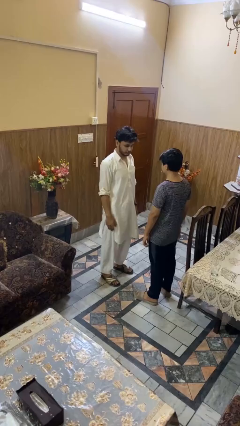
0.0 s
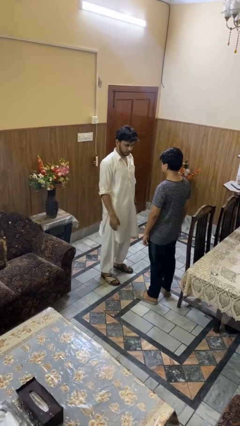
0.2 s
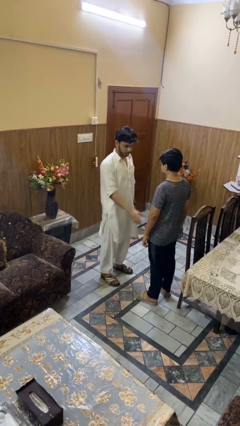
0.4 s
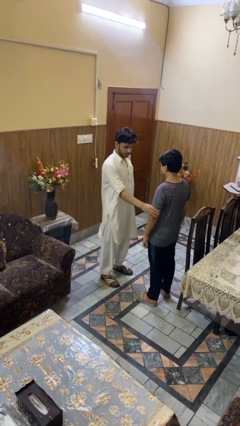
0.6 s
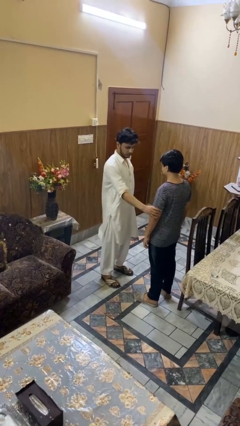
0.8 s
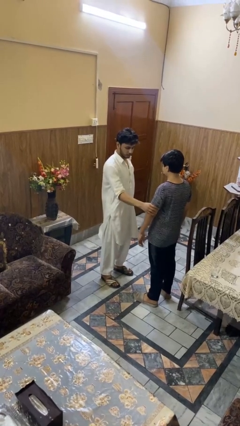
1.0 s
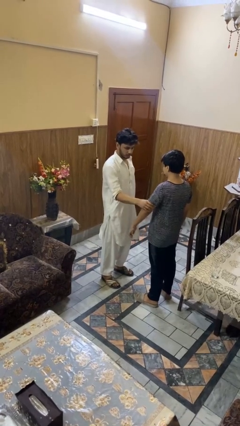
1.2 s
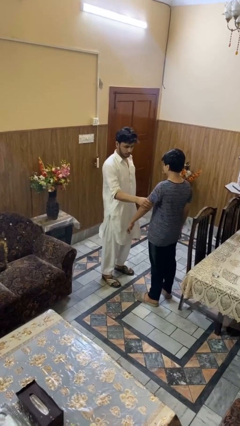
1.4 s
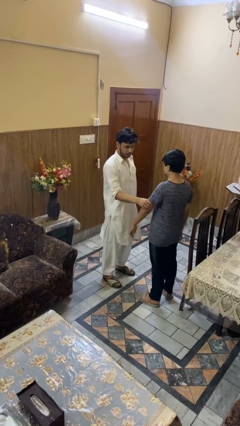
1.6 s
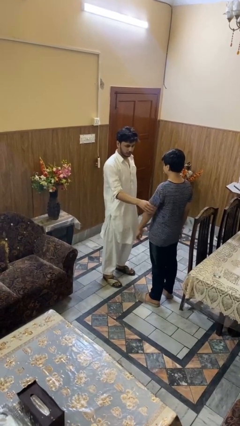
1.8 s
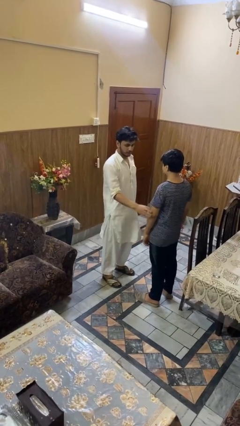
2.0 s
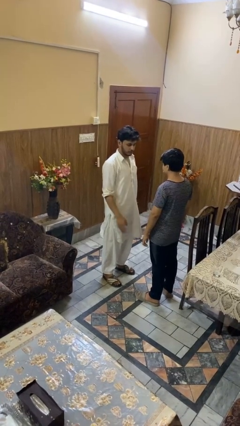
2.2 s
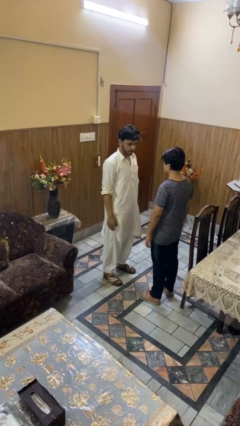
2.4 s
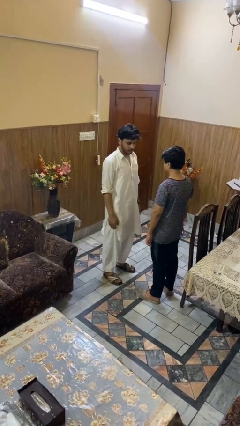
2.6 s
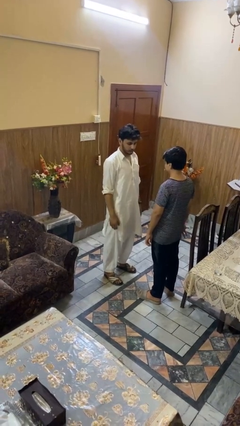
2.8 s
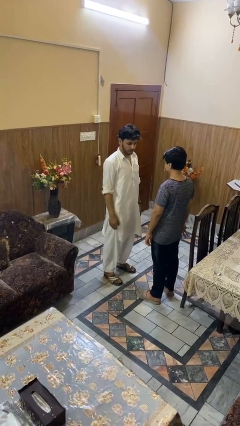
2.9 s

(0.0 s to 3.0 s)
person grabs person by bicep

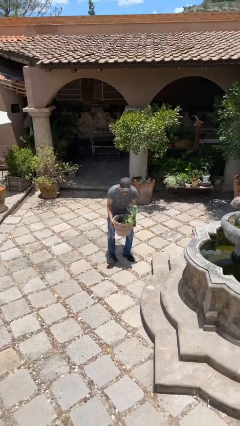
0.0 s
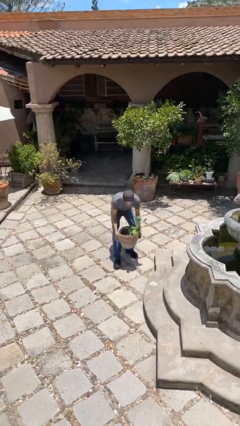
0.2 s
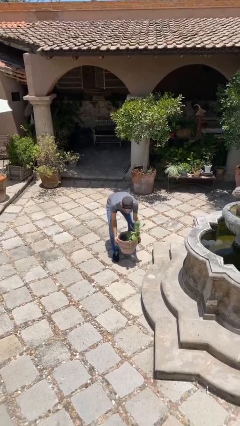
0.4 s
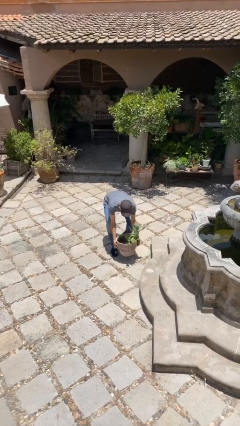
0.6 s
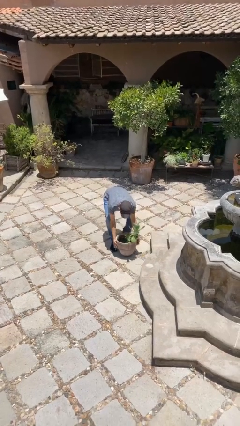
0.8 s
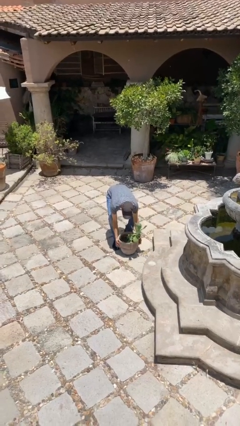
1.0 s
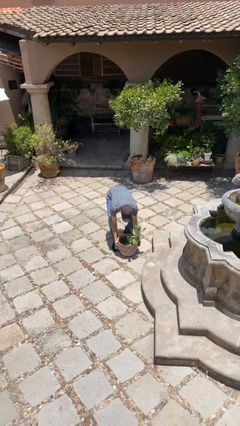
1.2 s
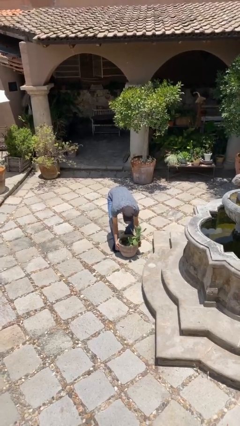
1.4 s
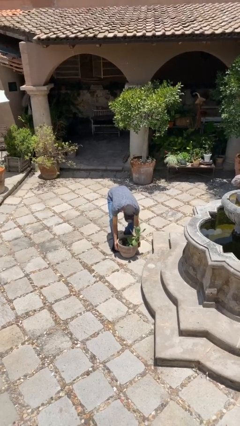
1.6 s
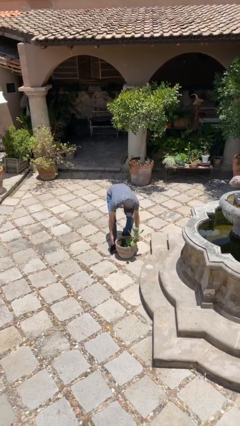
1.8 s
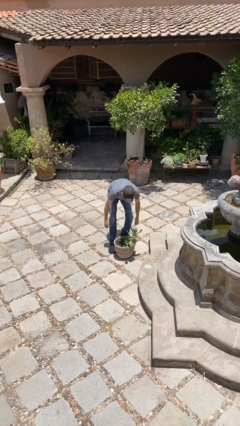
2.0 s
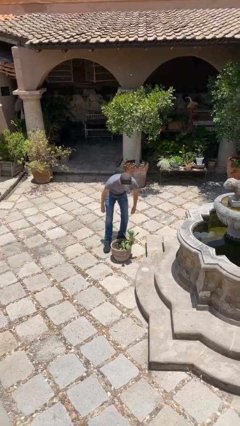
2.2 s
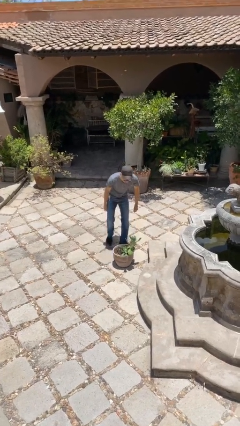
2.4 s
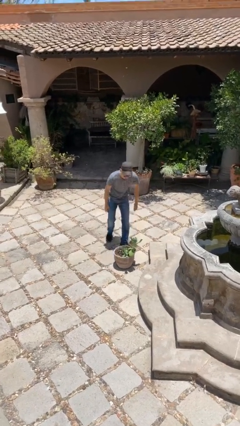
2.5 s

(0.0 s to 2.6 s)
person puts down object on floor

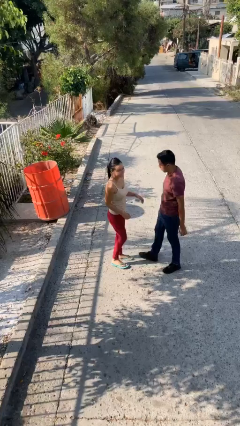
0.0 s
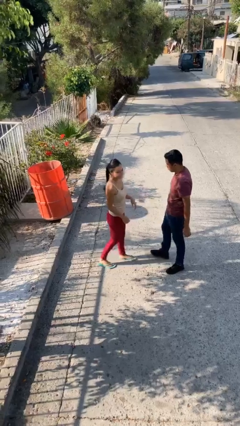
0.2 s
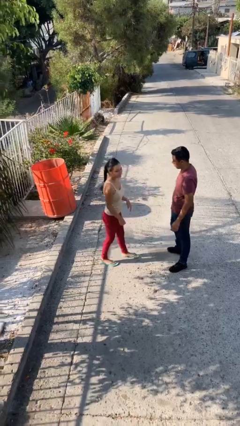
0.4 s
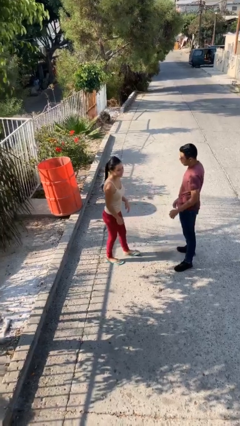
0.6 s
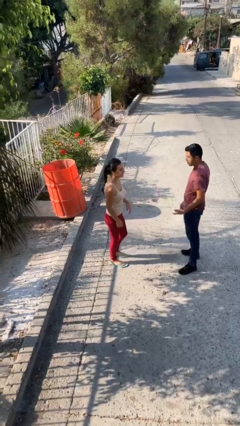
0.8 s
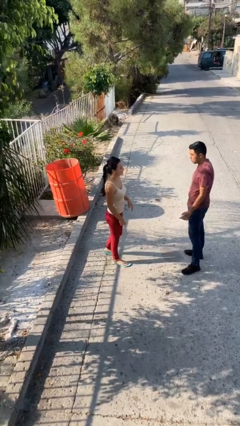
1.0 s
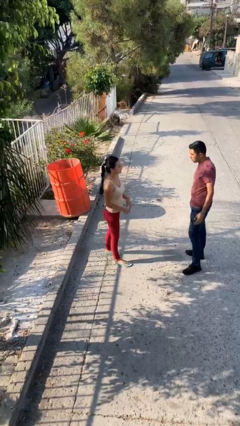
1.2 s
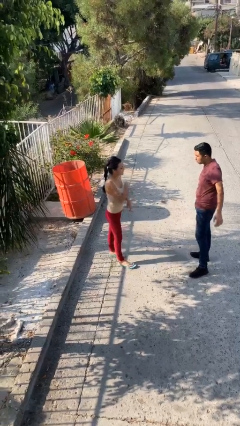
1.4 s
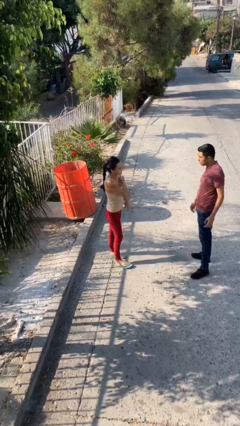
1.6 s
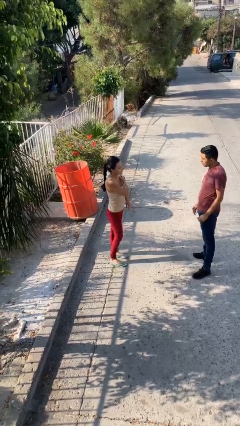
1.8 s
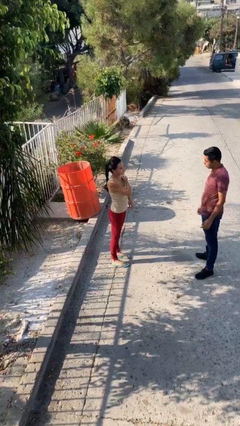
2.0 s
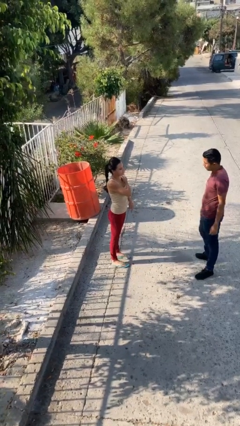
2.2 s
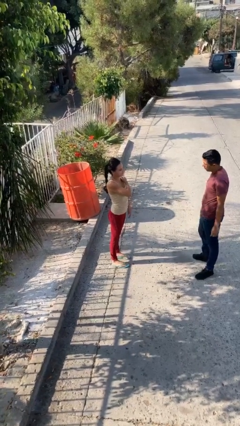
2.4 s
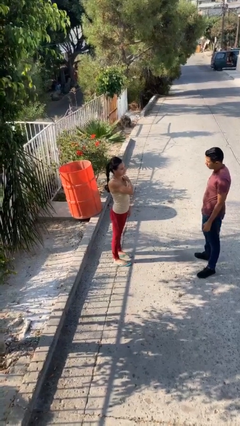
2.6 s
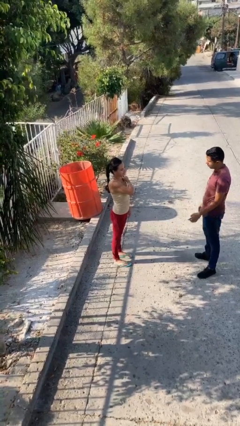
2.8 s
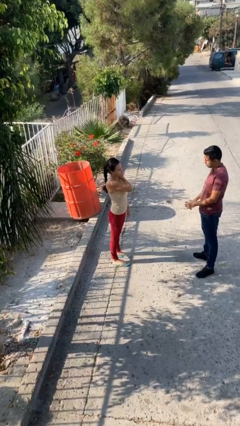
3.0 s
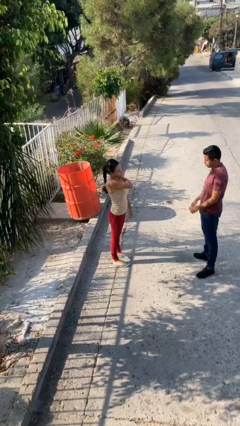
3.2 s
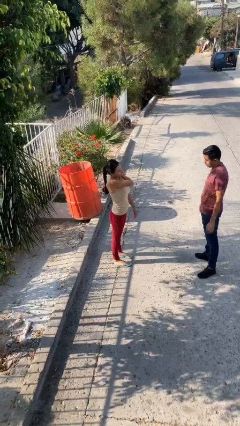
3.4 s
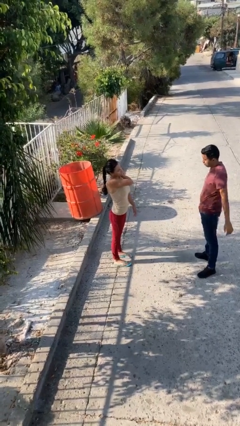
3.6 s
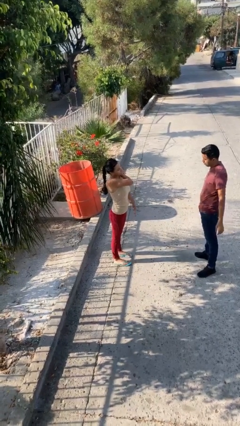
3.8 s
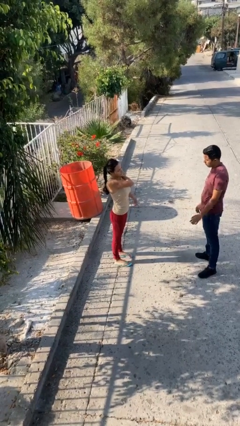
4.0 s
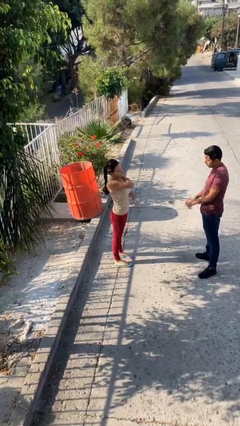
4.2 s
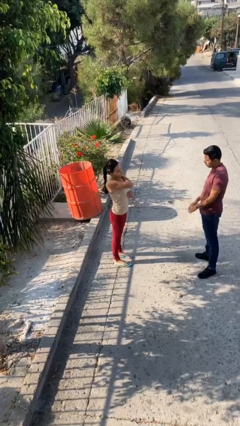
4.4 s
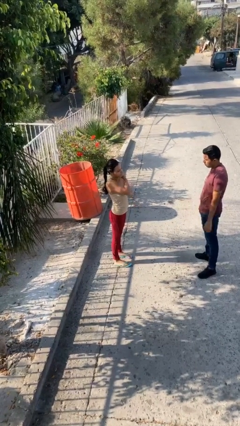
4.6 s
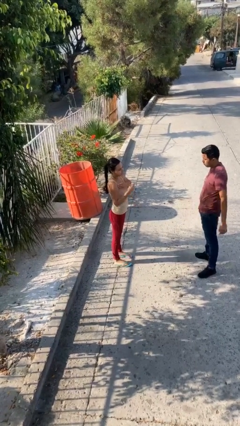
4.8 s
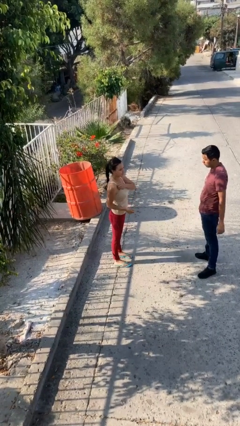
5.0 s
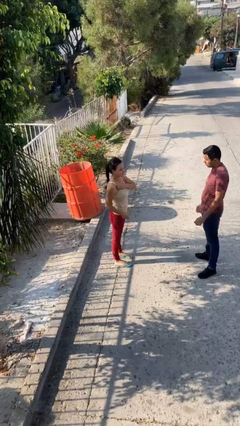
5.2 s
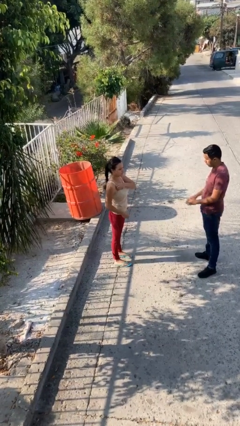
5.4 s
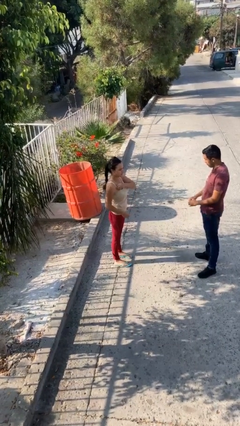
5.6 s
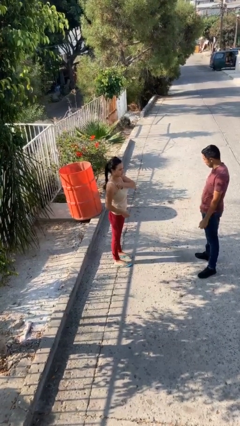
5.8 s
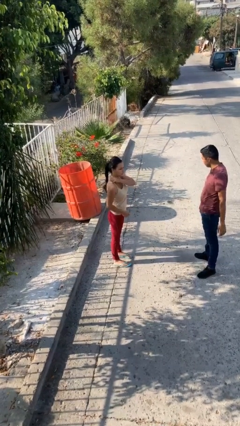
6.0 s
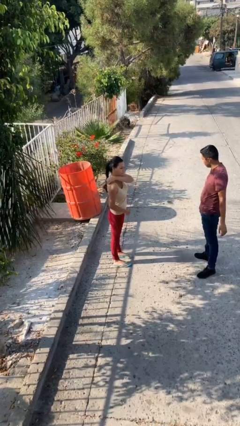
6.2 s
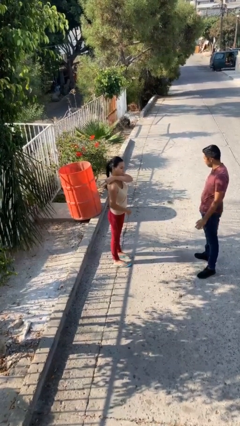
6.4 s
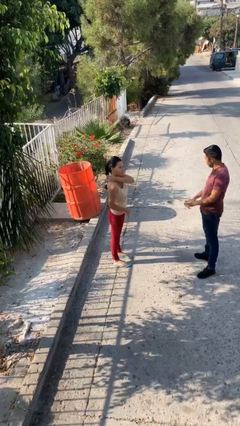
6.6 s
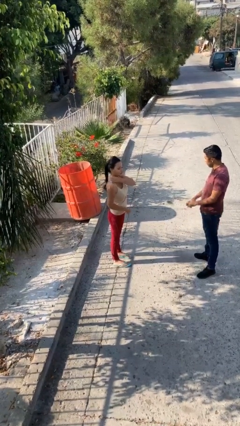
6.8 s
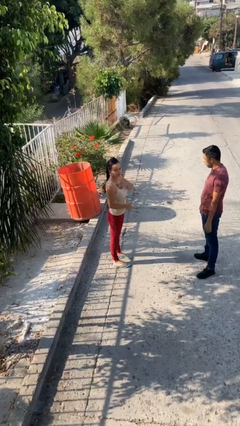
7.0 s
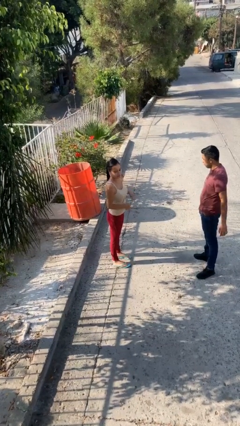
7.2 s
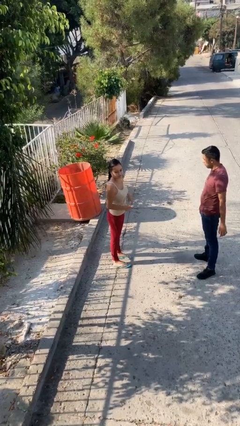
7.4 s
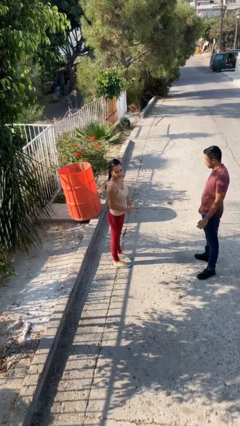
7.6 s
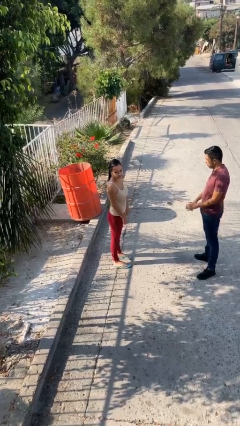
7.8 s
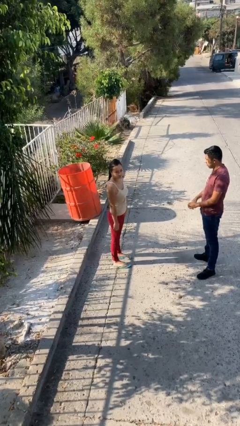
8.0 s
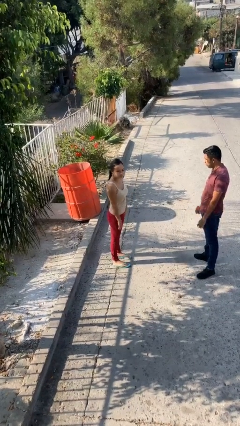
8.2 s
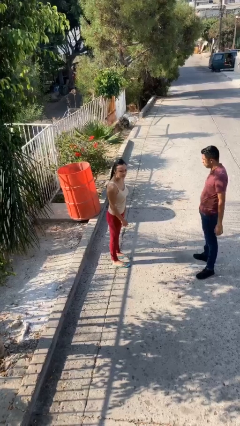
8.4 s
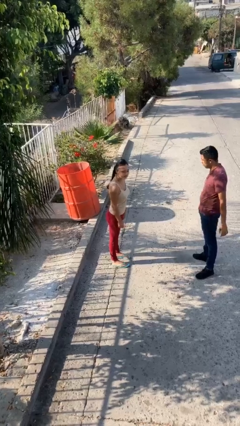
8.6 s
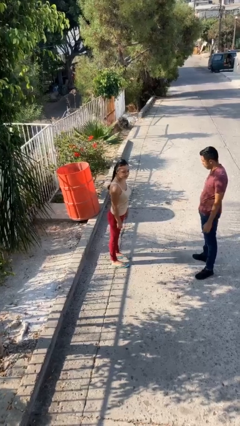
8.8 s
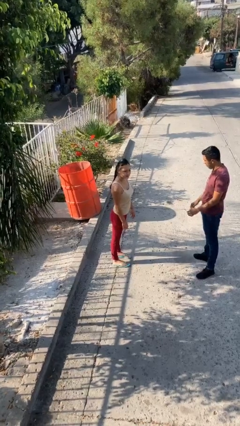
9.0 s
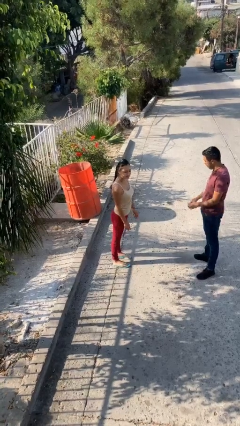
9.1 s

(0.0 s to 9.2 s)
person talks to person

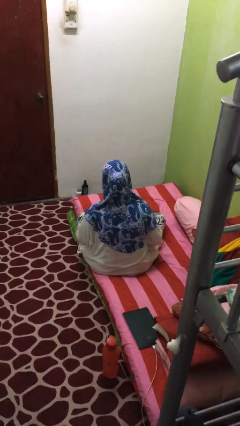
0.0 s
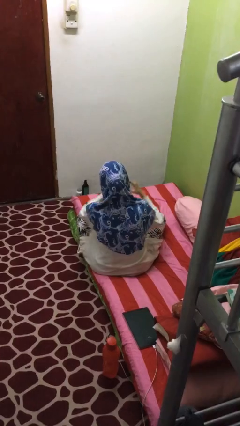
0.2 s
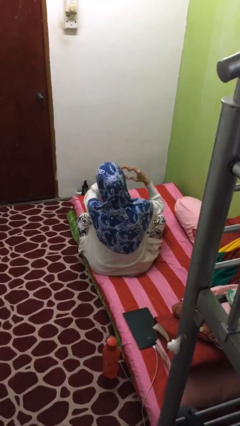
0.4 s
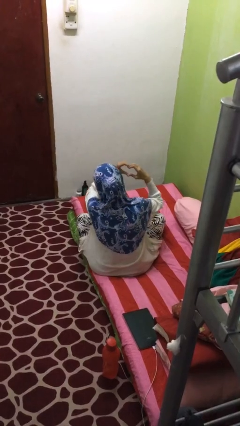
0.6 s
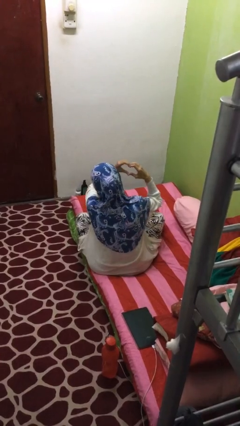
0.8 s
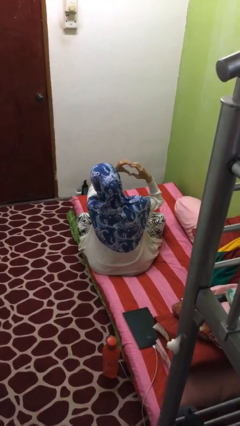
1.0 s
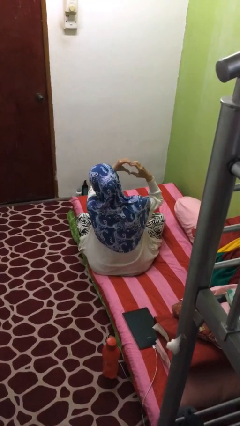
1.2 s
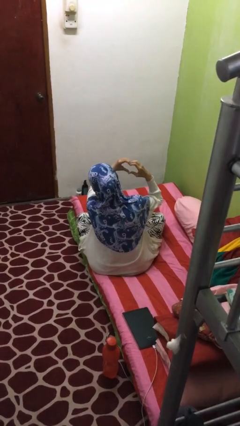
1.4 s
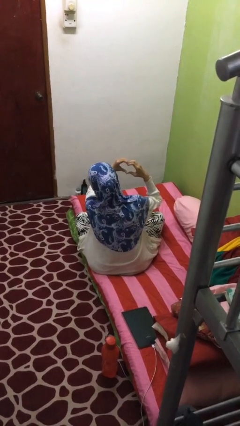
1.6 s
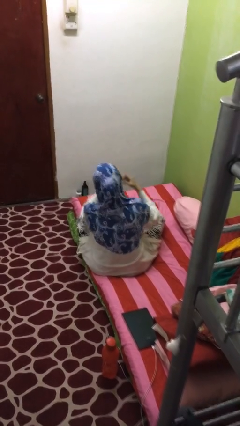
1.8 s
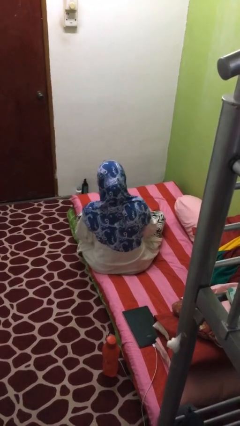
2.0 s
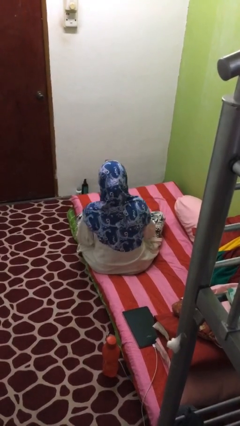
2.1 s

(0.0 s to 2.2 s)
person gestures heart

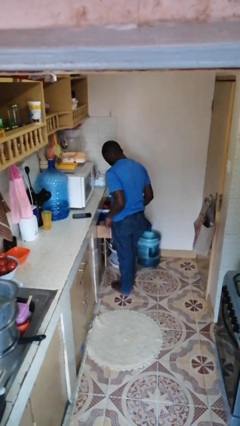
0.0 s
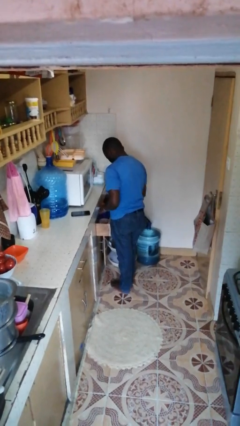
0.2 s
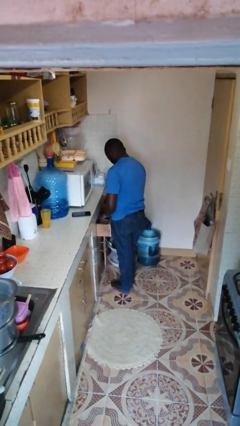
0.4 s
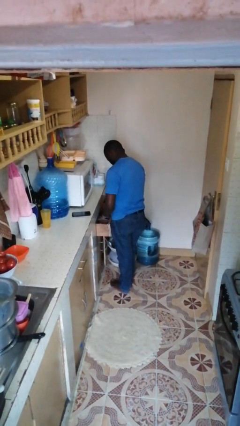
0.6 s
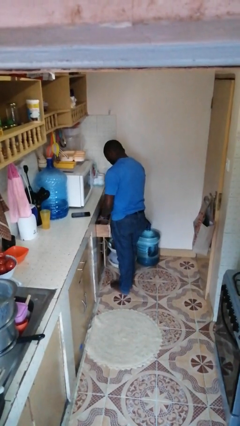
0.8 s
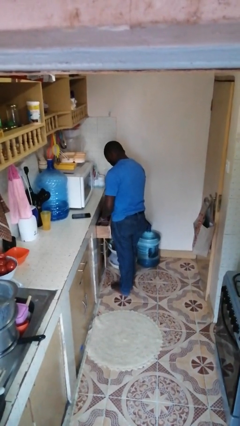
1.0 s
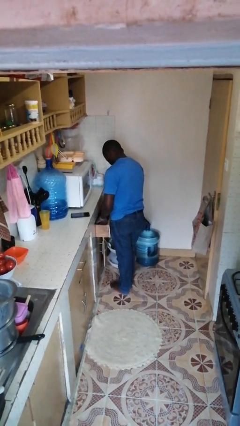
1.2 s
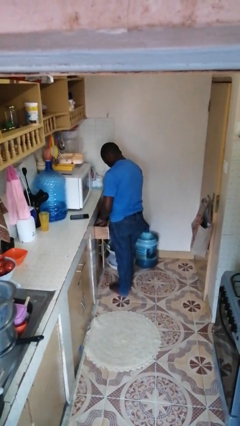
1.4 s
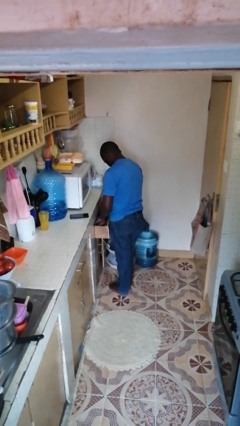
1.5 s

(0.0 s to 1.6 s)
person searches in kitchen drawer
